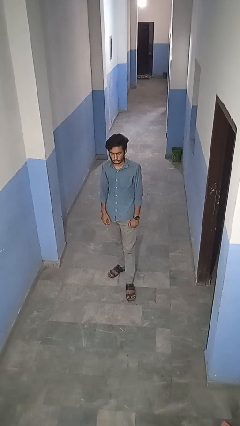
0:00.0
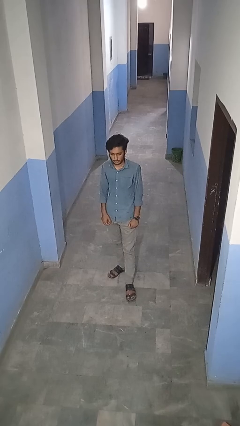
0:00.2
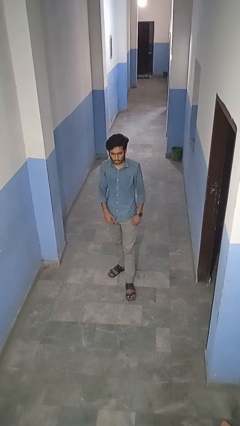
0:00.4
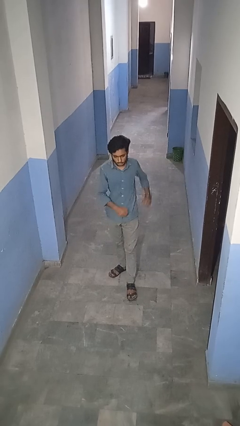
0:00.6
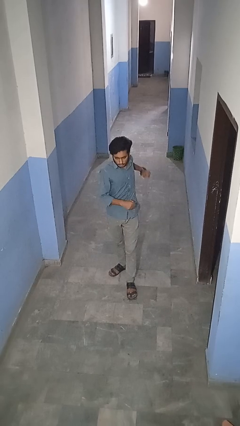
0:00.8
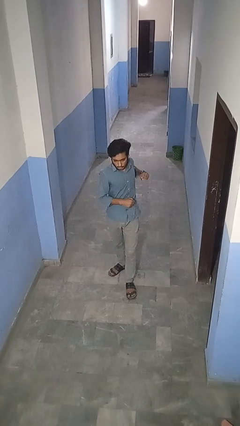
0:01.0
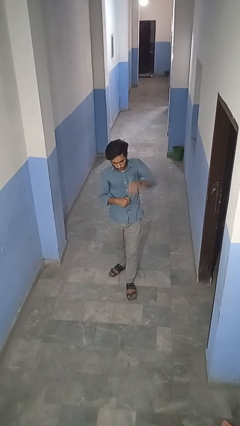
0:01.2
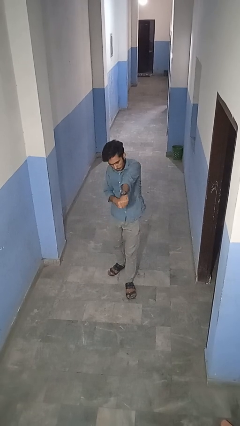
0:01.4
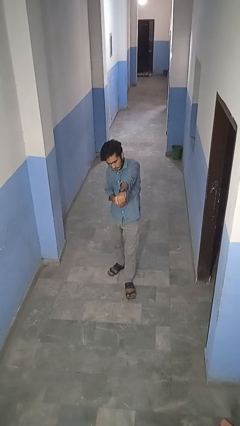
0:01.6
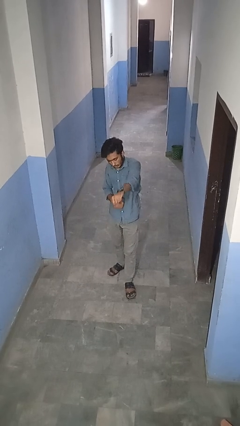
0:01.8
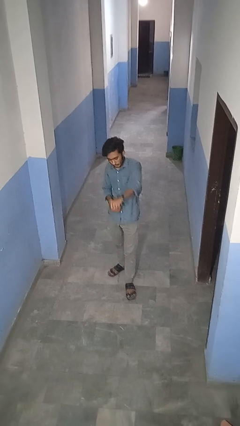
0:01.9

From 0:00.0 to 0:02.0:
person punches

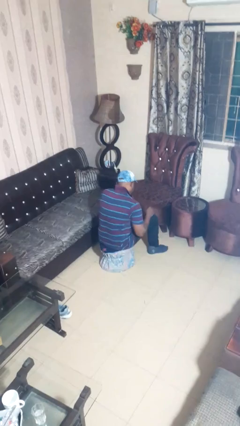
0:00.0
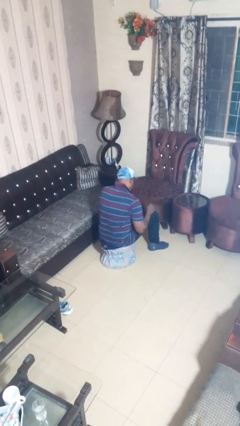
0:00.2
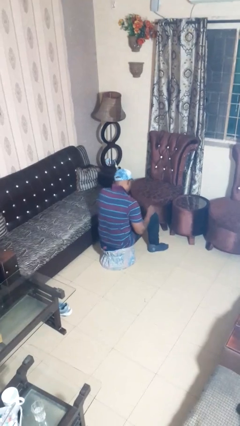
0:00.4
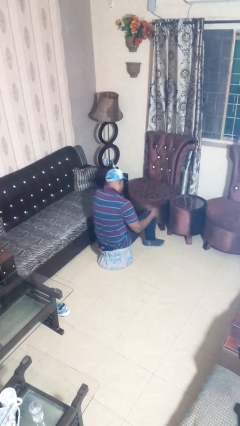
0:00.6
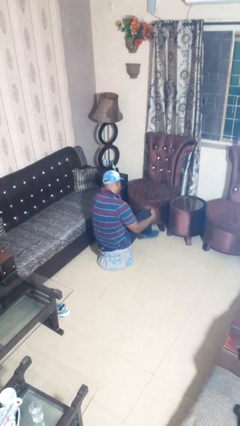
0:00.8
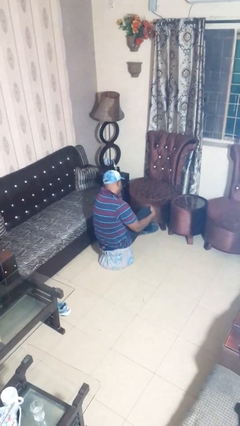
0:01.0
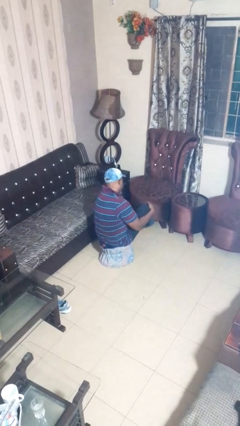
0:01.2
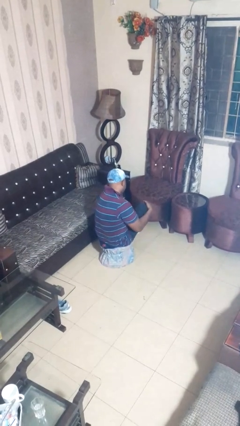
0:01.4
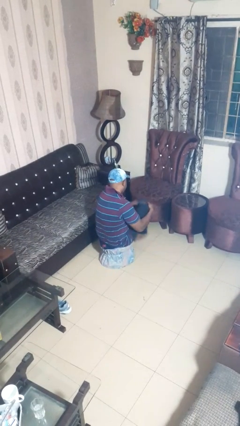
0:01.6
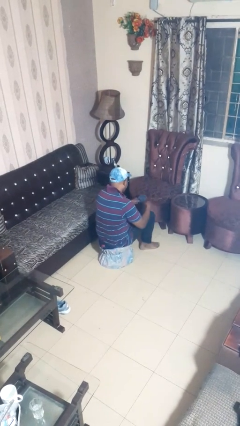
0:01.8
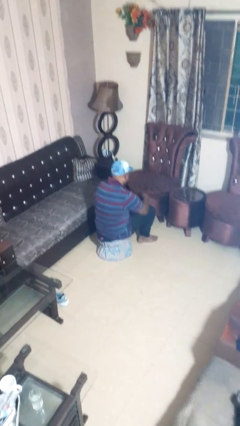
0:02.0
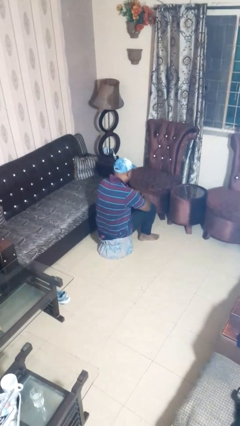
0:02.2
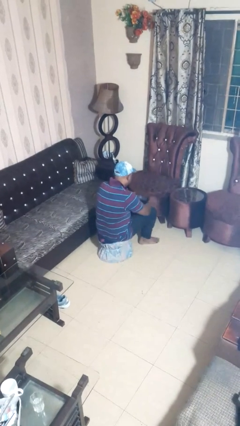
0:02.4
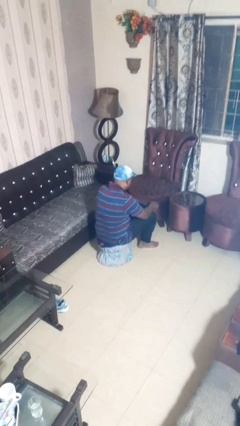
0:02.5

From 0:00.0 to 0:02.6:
person takes off socks

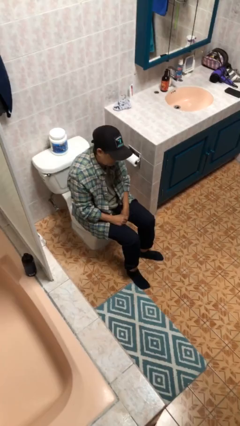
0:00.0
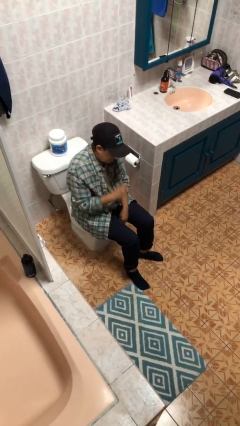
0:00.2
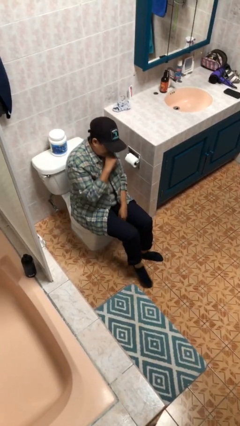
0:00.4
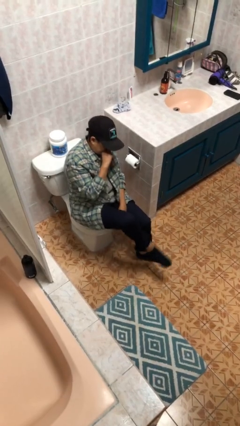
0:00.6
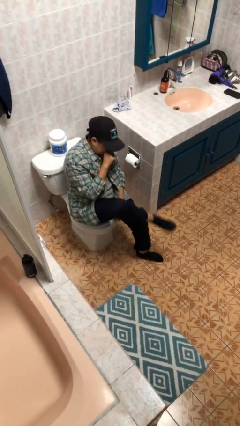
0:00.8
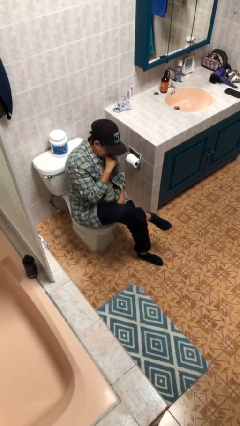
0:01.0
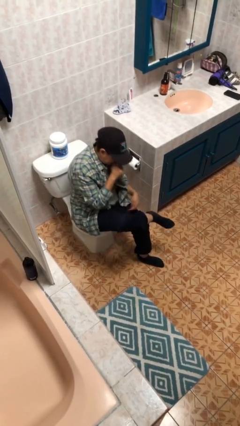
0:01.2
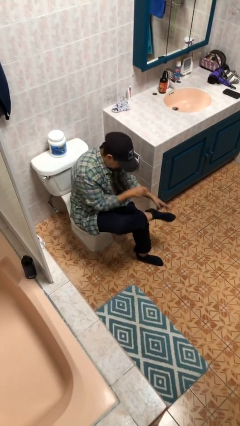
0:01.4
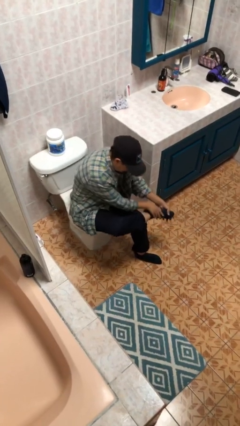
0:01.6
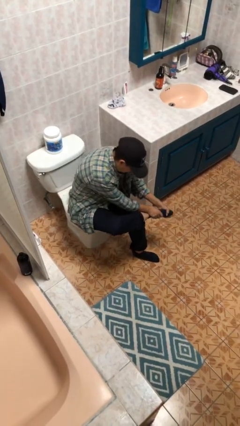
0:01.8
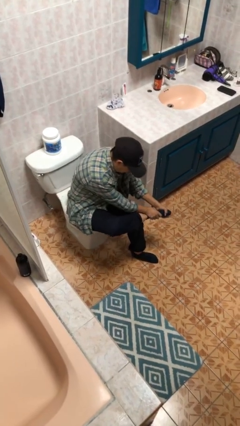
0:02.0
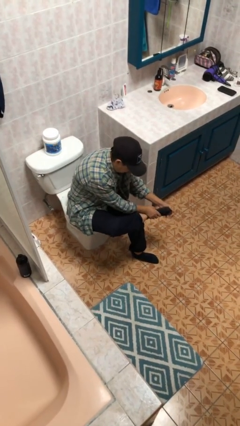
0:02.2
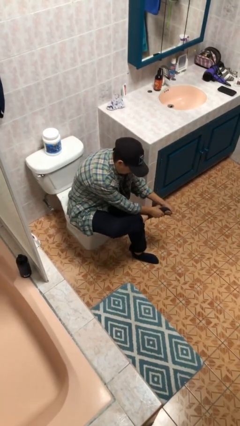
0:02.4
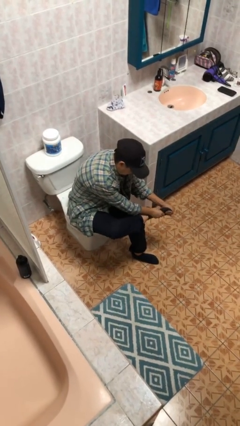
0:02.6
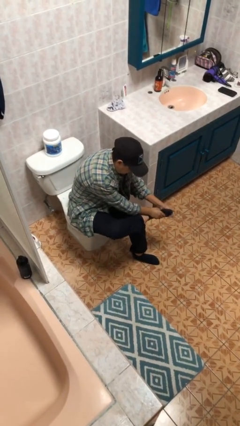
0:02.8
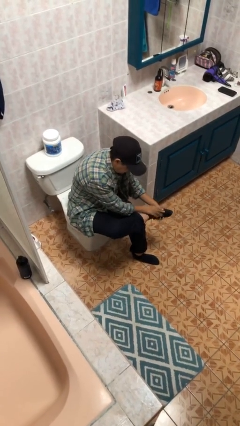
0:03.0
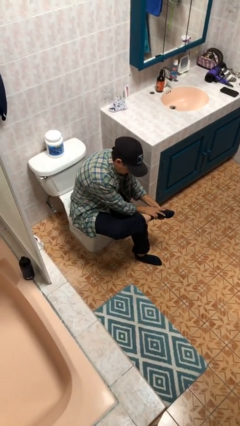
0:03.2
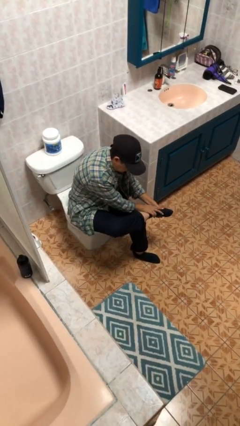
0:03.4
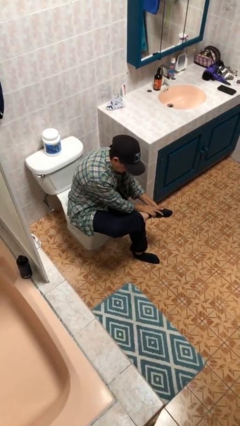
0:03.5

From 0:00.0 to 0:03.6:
person rubs foot

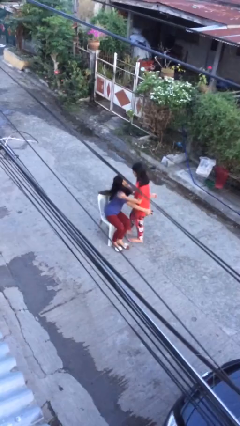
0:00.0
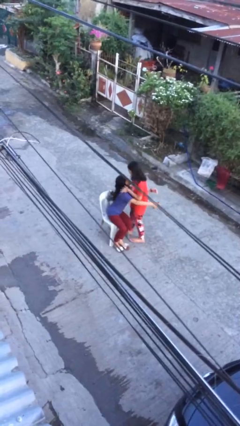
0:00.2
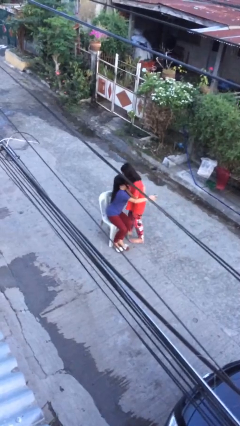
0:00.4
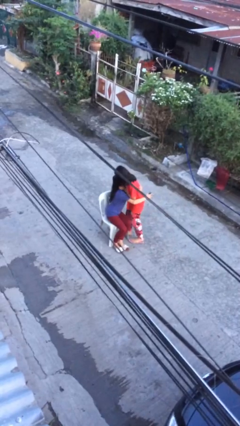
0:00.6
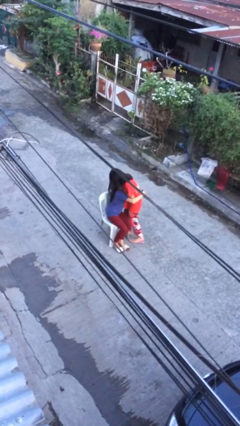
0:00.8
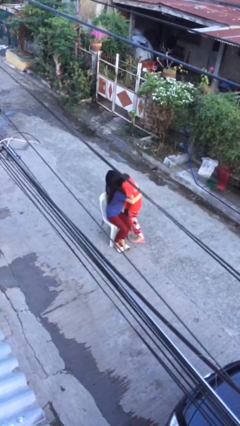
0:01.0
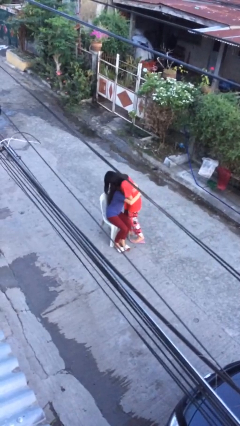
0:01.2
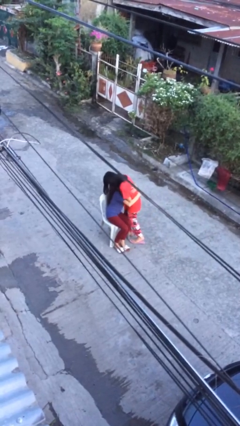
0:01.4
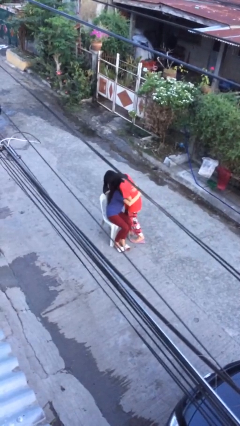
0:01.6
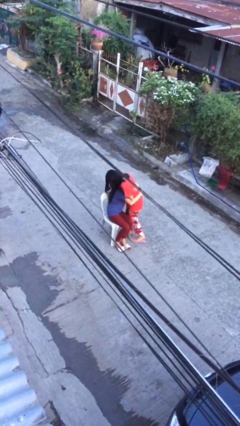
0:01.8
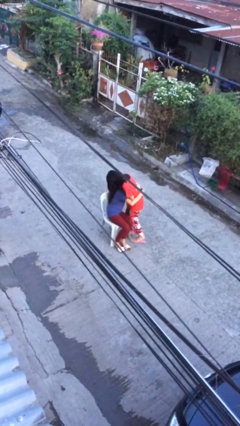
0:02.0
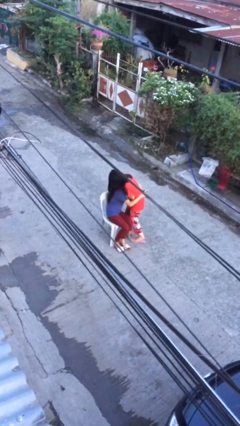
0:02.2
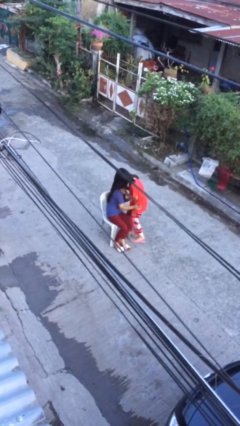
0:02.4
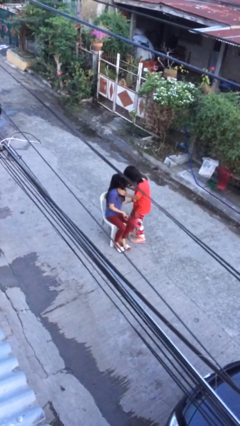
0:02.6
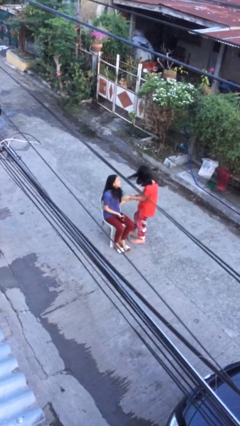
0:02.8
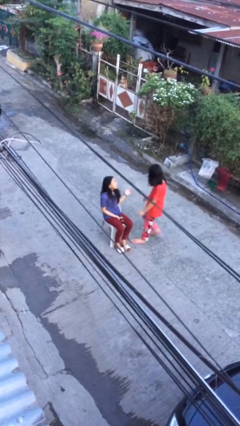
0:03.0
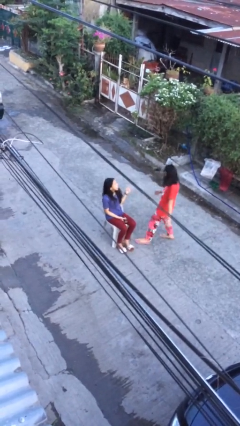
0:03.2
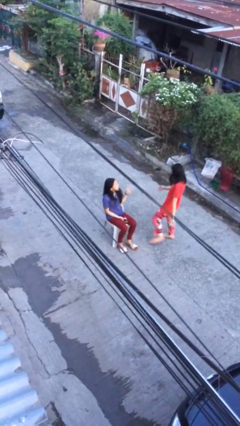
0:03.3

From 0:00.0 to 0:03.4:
person embraces person

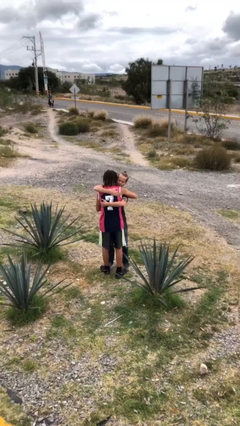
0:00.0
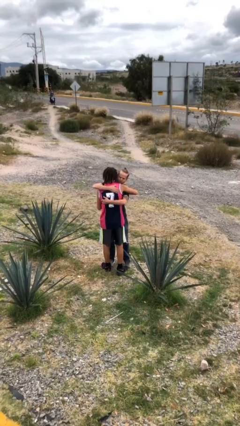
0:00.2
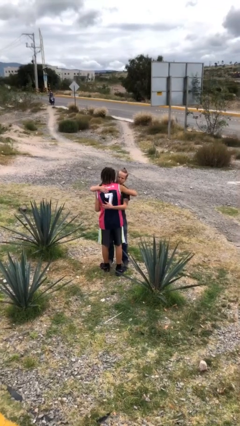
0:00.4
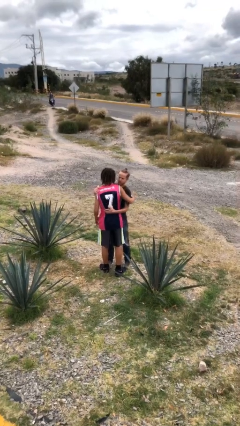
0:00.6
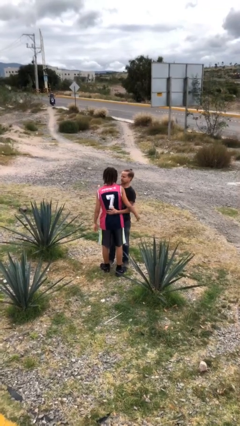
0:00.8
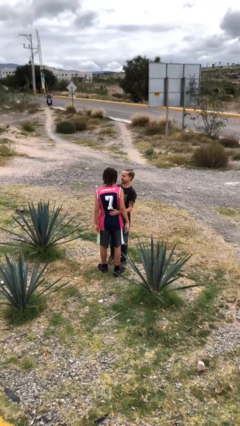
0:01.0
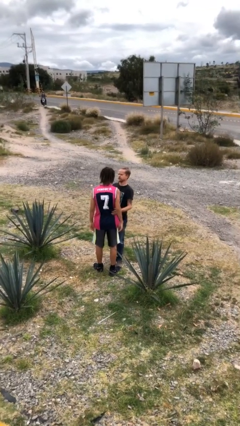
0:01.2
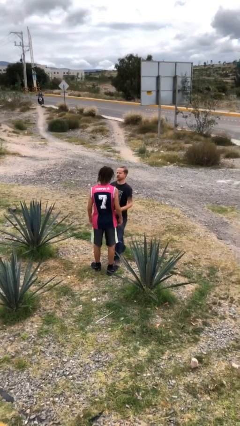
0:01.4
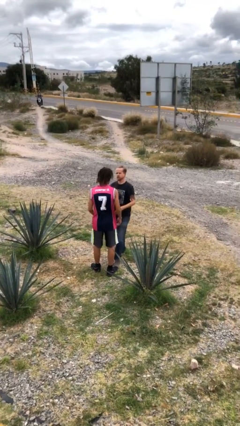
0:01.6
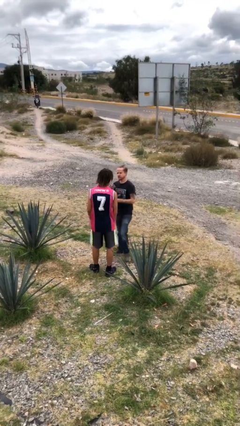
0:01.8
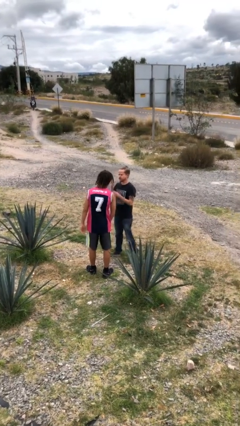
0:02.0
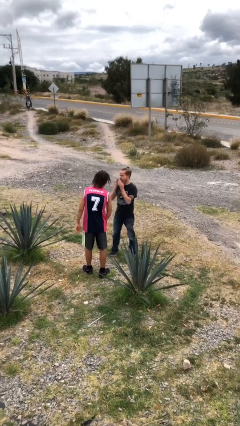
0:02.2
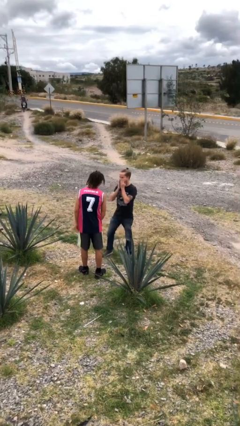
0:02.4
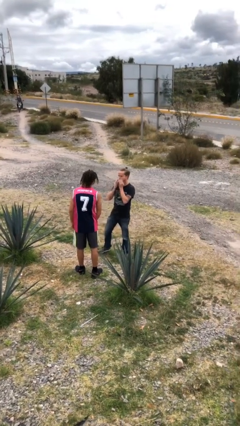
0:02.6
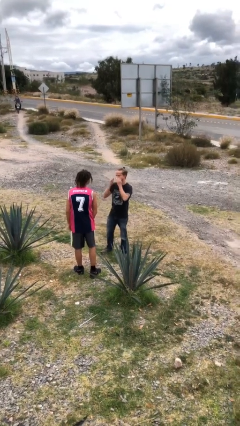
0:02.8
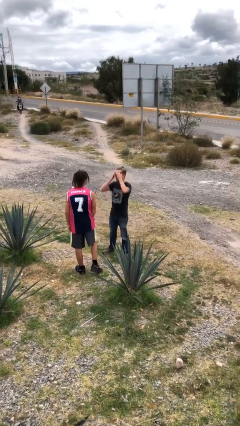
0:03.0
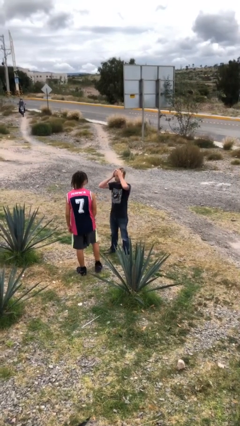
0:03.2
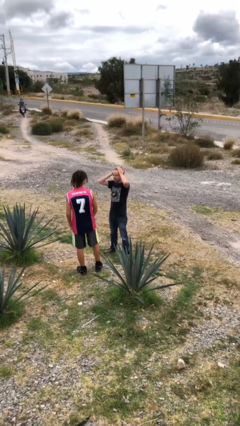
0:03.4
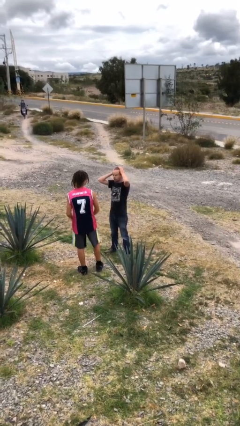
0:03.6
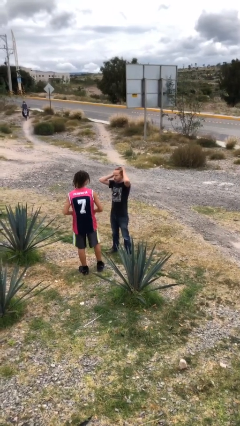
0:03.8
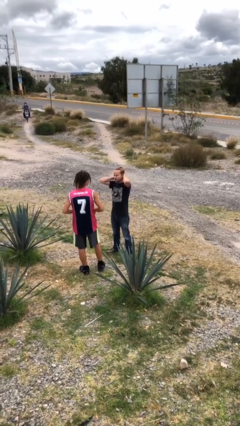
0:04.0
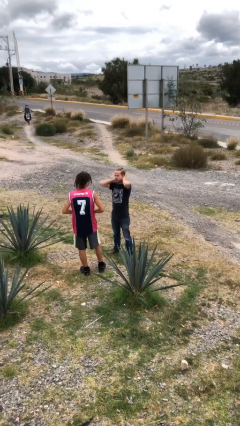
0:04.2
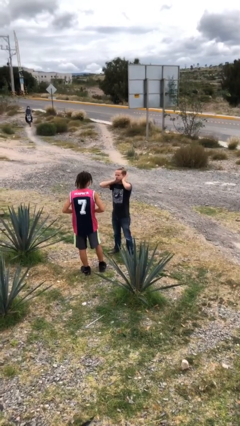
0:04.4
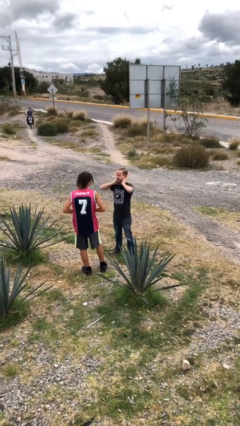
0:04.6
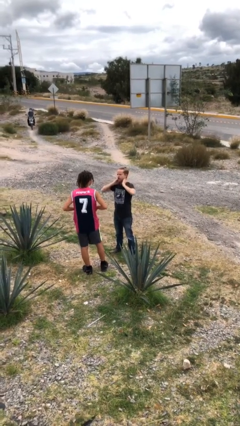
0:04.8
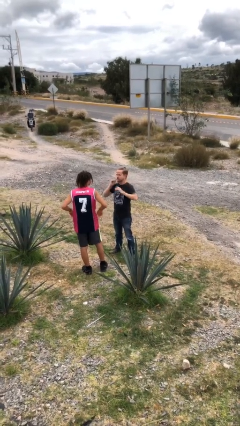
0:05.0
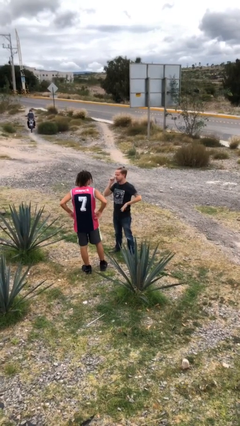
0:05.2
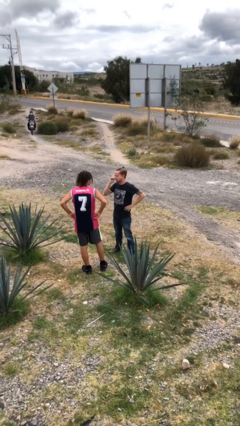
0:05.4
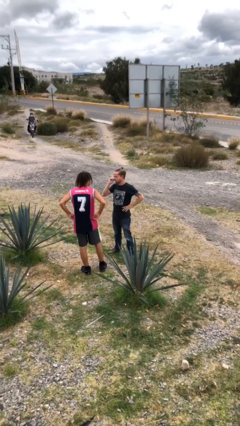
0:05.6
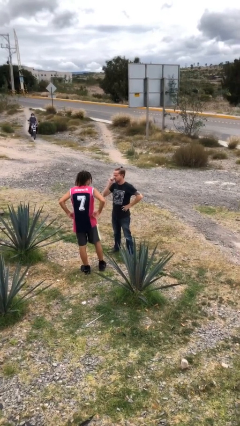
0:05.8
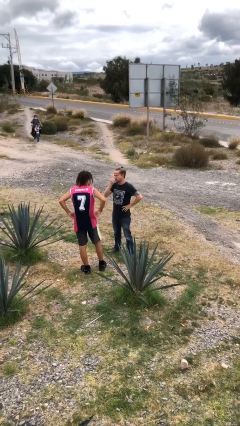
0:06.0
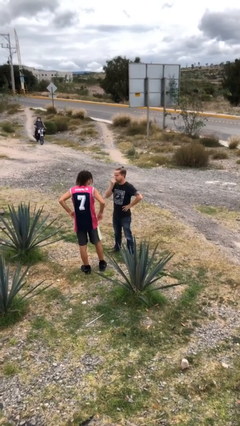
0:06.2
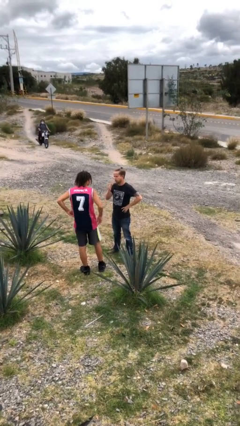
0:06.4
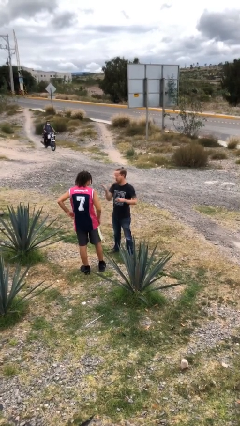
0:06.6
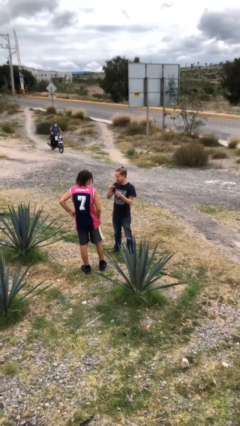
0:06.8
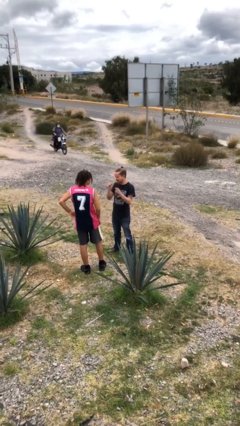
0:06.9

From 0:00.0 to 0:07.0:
person talks to person
